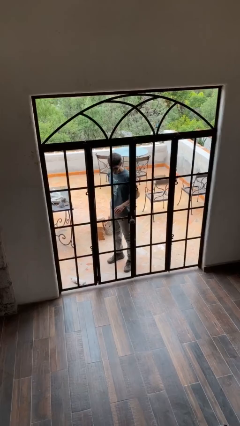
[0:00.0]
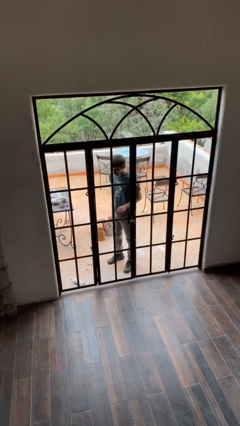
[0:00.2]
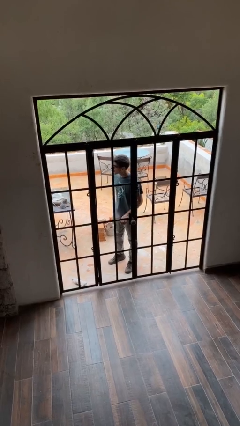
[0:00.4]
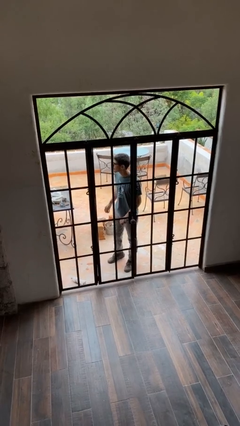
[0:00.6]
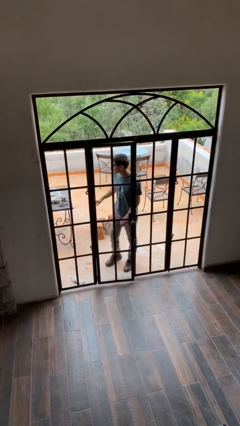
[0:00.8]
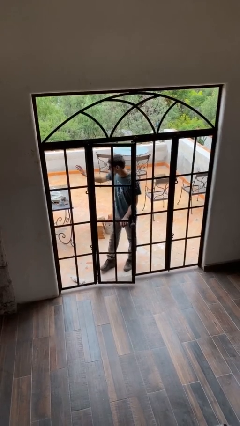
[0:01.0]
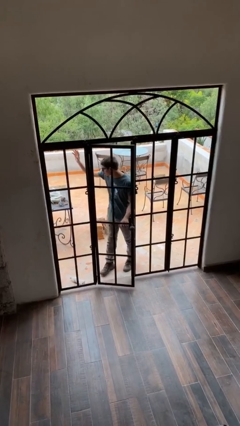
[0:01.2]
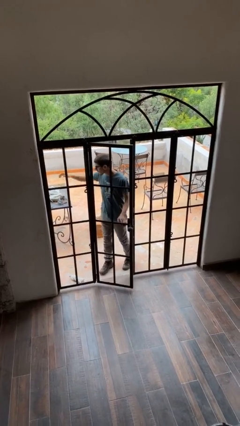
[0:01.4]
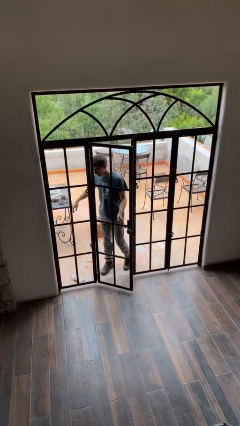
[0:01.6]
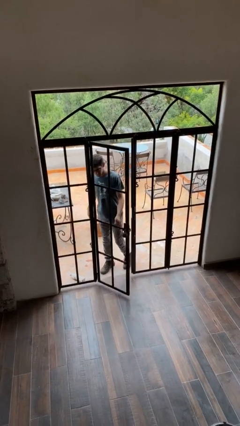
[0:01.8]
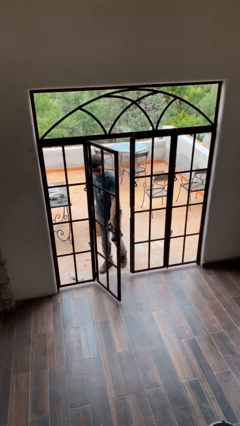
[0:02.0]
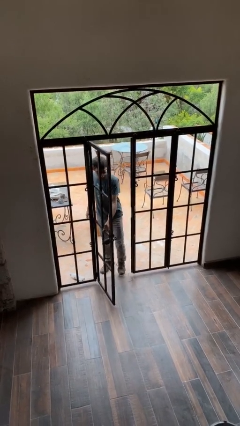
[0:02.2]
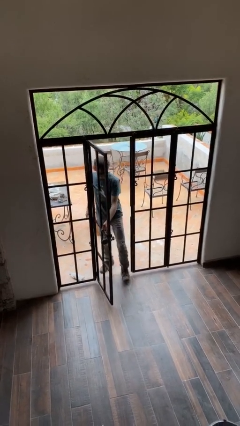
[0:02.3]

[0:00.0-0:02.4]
person opens facility door

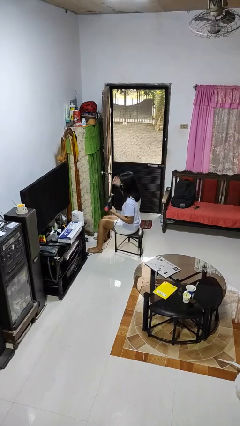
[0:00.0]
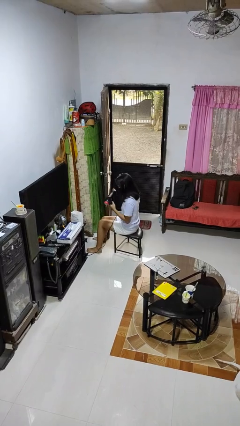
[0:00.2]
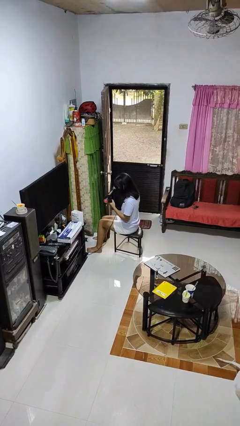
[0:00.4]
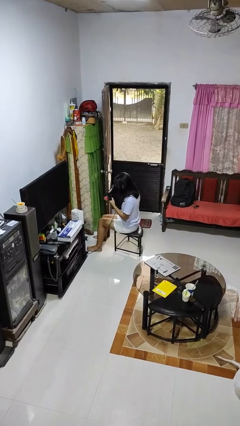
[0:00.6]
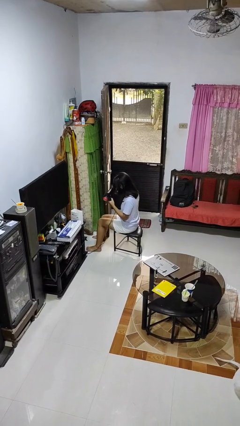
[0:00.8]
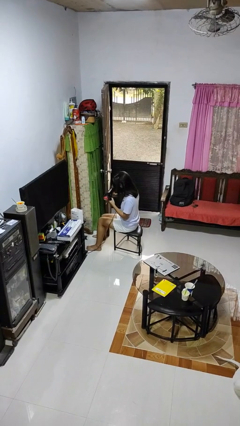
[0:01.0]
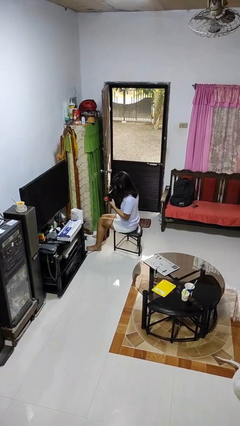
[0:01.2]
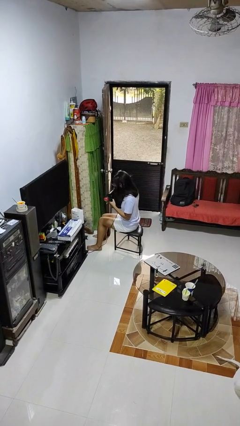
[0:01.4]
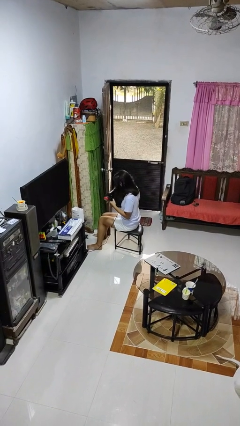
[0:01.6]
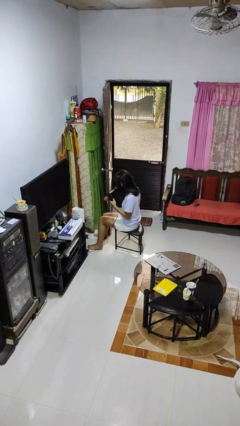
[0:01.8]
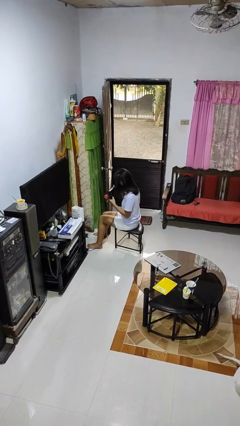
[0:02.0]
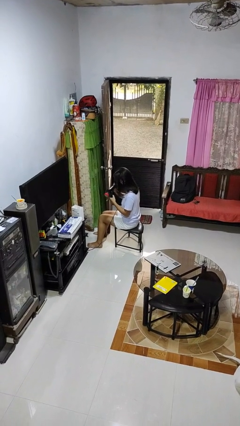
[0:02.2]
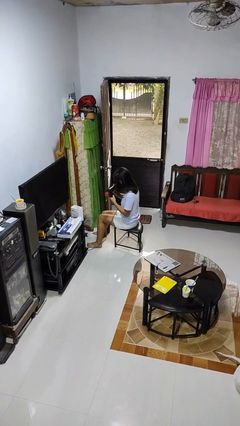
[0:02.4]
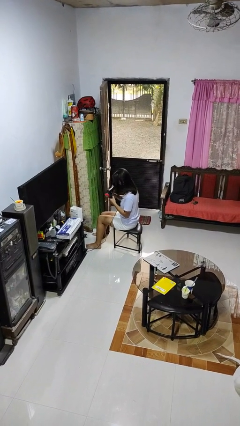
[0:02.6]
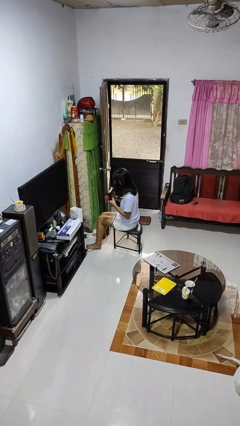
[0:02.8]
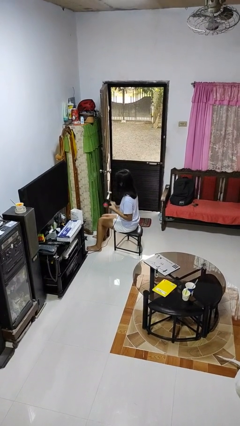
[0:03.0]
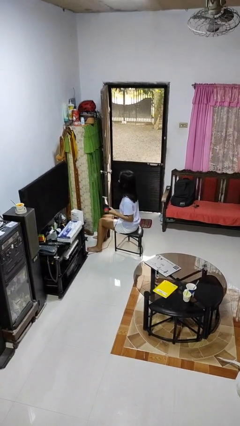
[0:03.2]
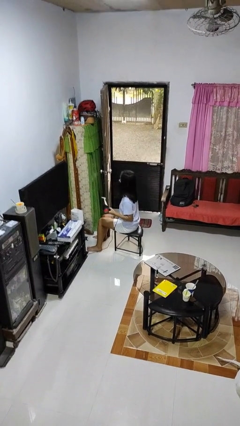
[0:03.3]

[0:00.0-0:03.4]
person dries hair with hairdryer

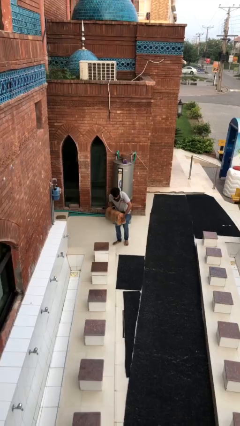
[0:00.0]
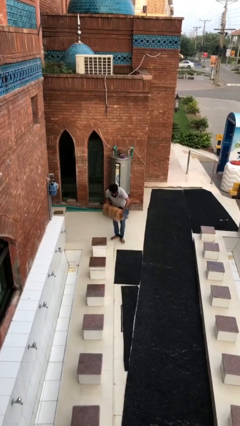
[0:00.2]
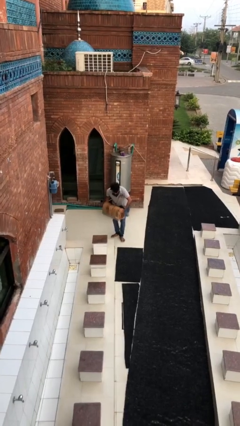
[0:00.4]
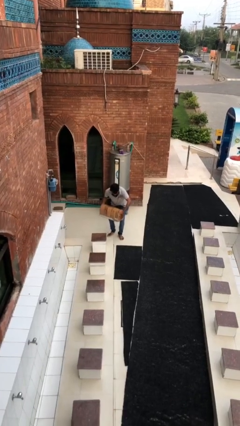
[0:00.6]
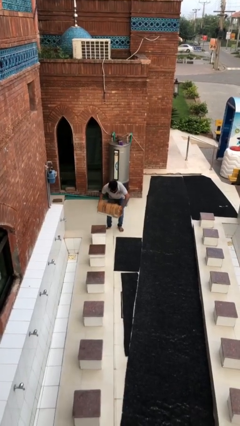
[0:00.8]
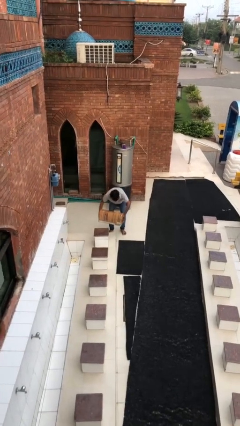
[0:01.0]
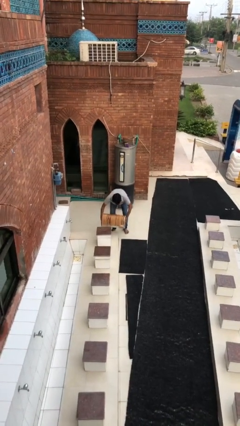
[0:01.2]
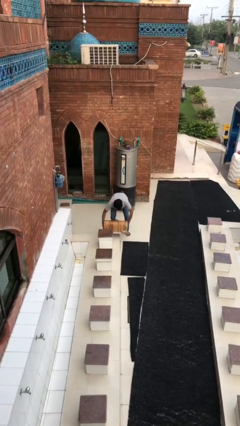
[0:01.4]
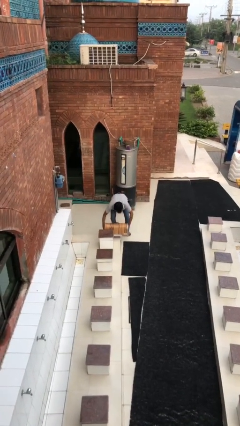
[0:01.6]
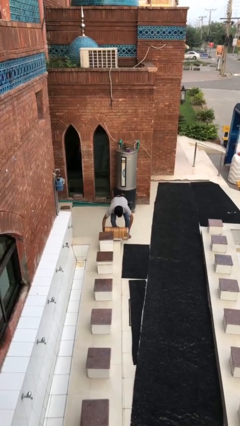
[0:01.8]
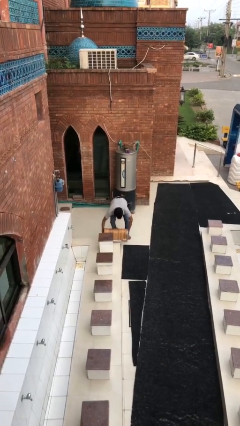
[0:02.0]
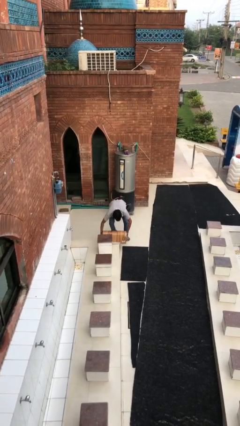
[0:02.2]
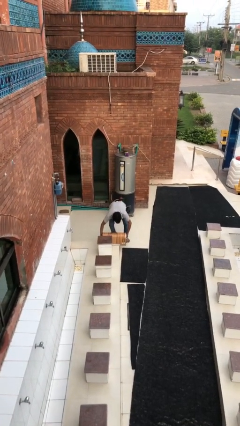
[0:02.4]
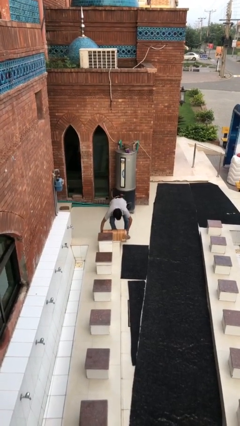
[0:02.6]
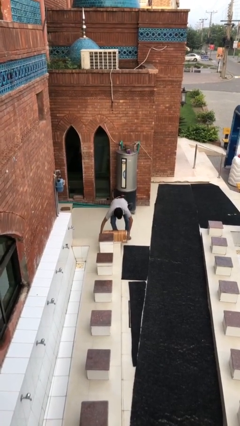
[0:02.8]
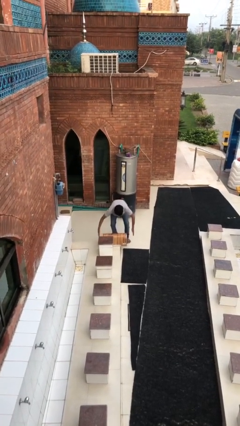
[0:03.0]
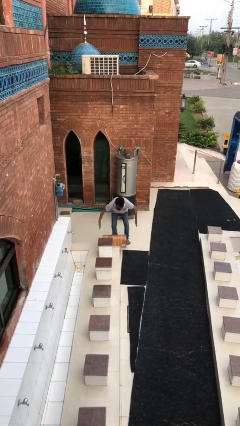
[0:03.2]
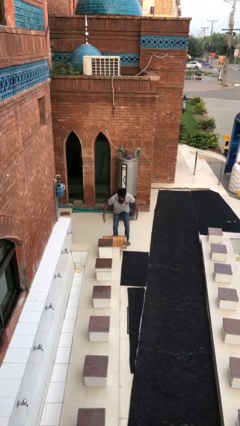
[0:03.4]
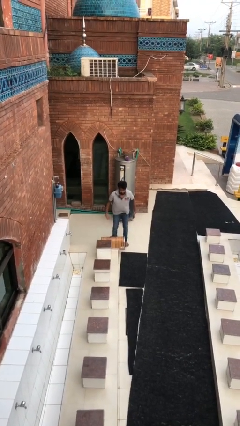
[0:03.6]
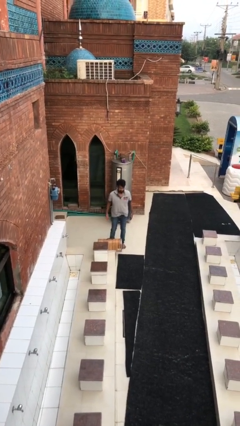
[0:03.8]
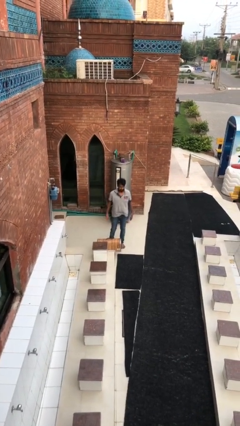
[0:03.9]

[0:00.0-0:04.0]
person puts down object on floor

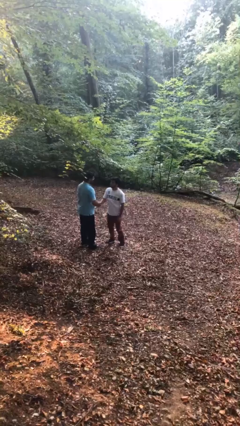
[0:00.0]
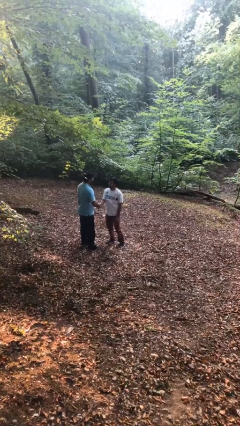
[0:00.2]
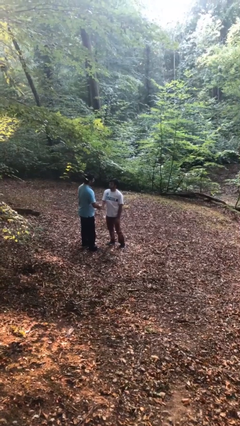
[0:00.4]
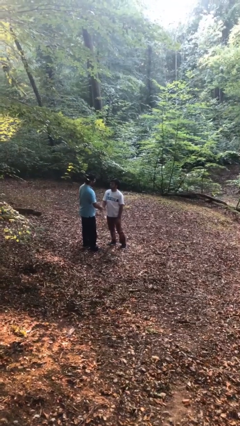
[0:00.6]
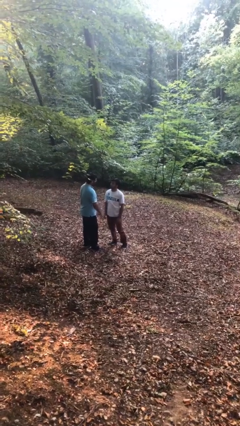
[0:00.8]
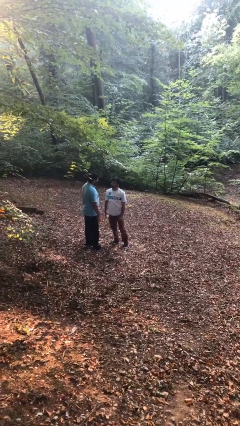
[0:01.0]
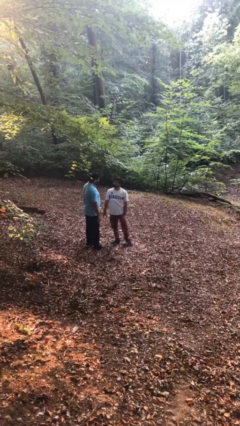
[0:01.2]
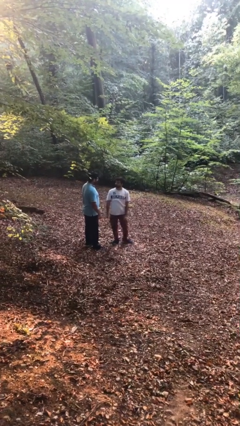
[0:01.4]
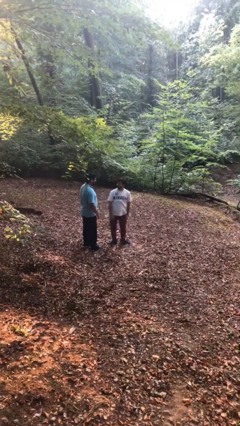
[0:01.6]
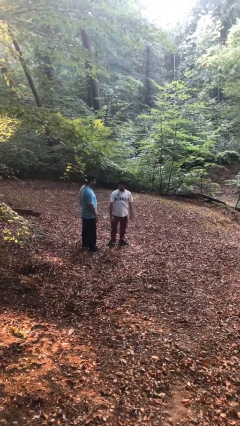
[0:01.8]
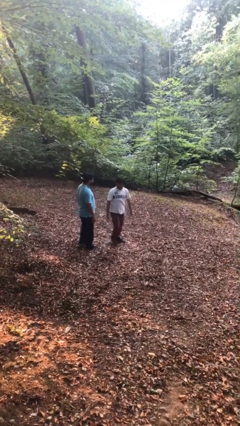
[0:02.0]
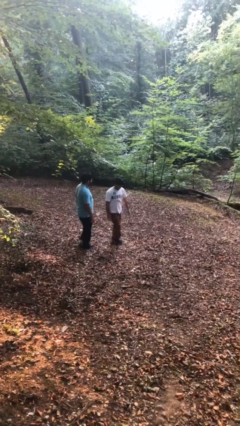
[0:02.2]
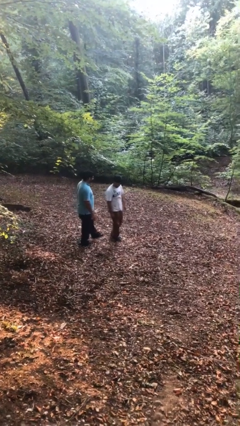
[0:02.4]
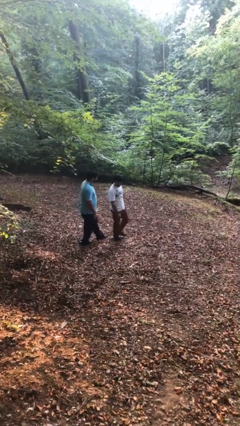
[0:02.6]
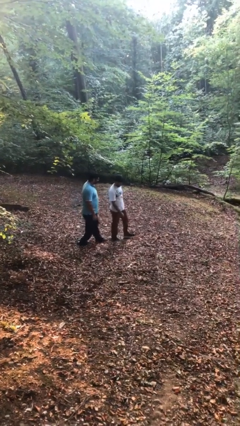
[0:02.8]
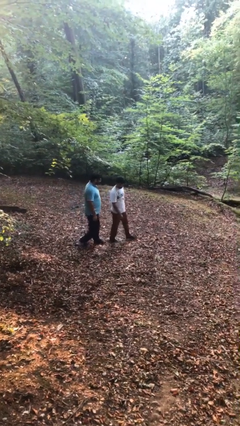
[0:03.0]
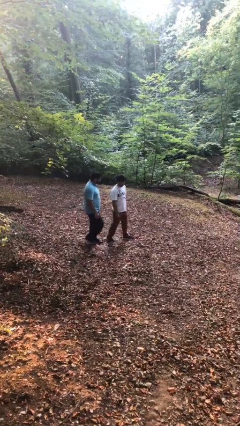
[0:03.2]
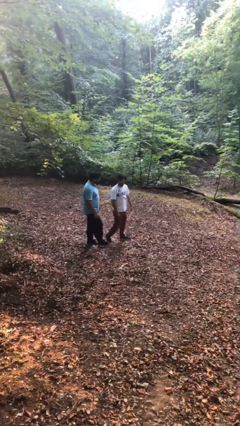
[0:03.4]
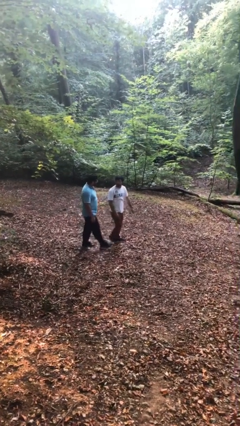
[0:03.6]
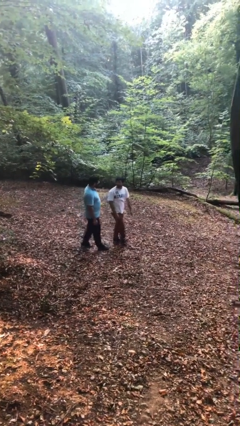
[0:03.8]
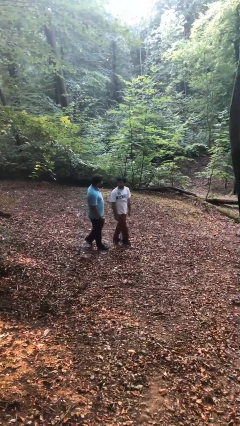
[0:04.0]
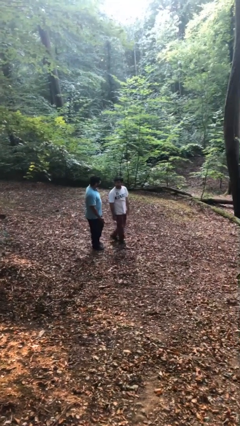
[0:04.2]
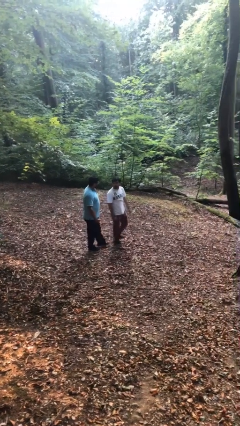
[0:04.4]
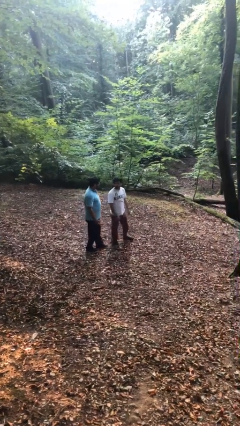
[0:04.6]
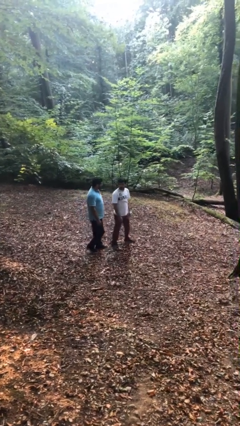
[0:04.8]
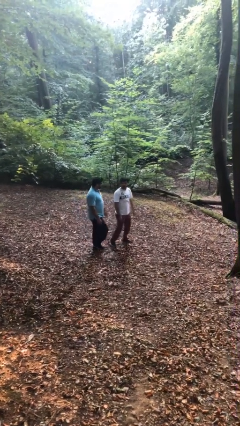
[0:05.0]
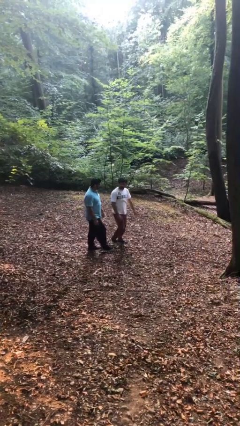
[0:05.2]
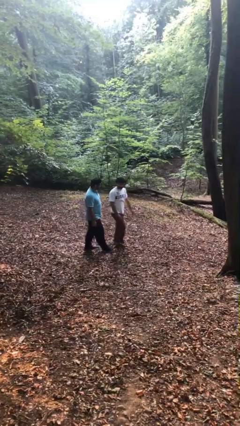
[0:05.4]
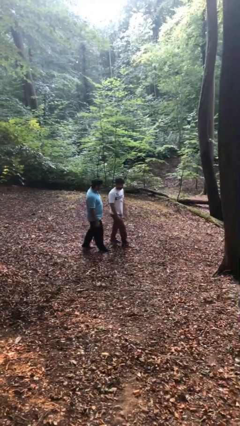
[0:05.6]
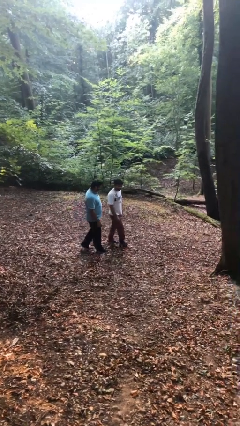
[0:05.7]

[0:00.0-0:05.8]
person talks to person

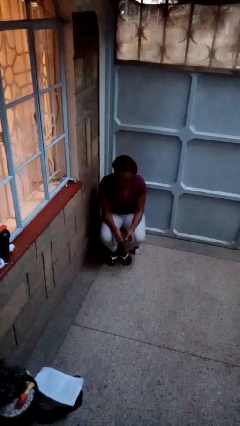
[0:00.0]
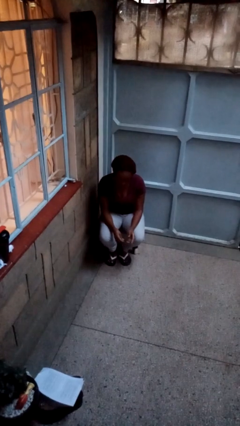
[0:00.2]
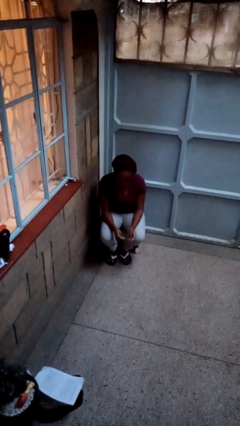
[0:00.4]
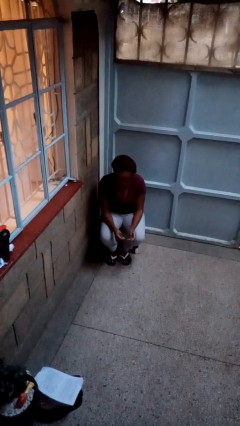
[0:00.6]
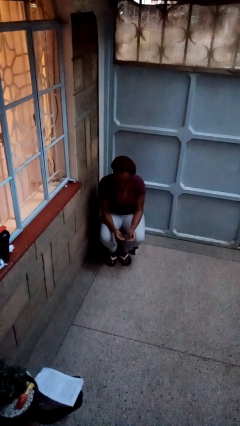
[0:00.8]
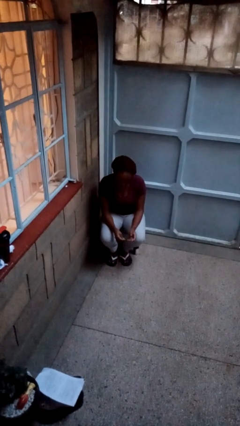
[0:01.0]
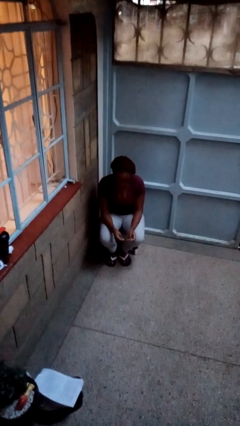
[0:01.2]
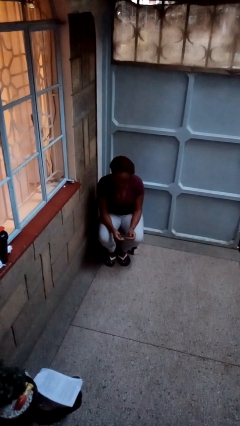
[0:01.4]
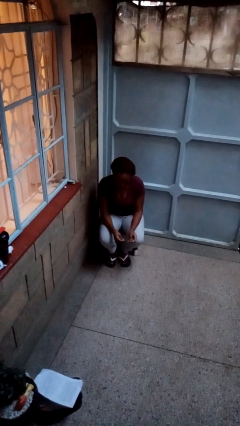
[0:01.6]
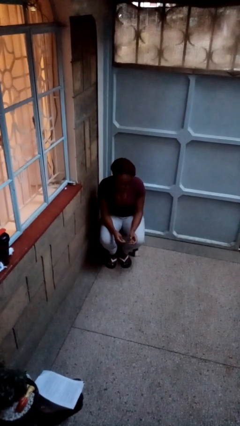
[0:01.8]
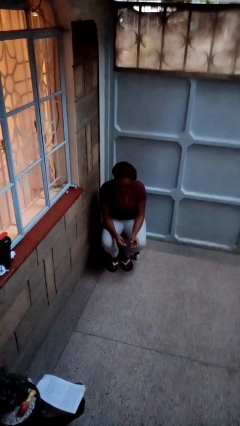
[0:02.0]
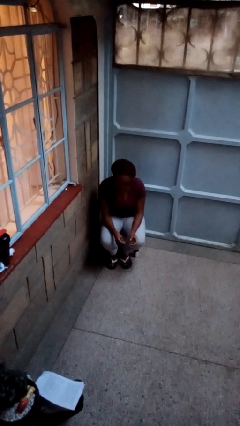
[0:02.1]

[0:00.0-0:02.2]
person clips fingernails
